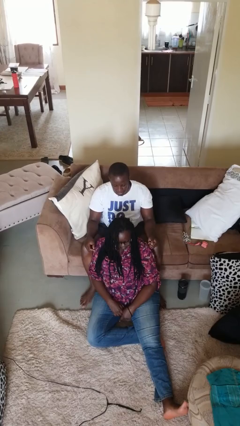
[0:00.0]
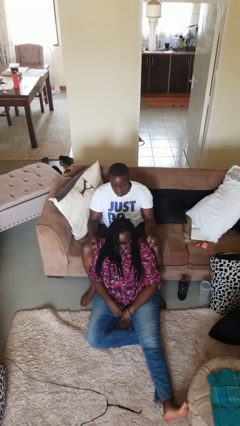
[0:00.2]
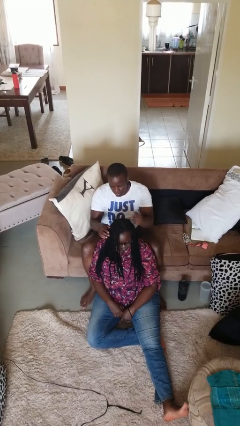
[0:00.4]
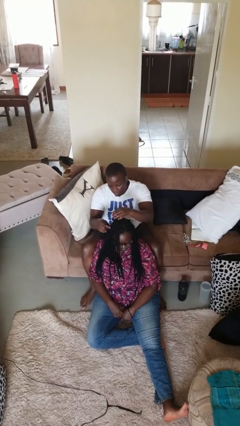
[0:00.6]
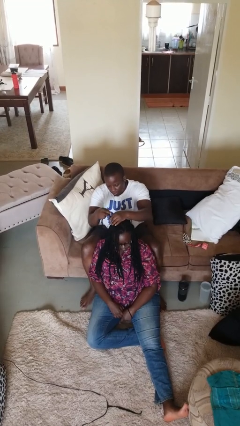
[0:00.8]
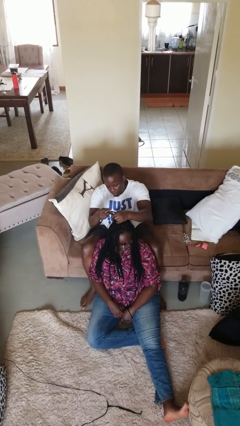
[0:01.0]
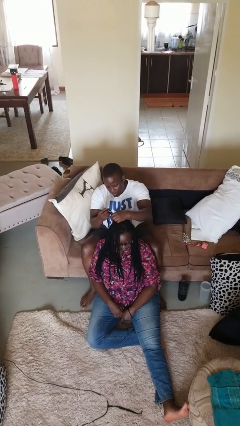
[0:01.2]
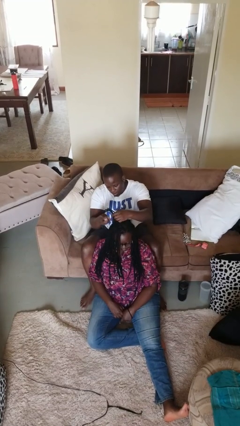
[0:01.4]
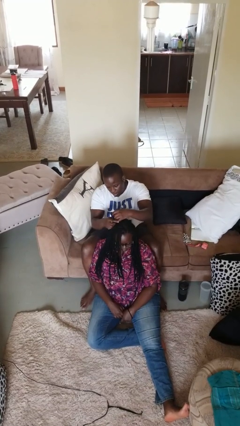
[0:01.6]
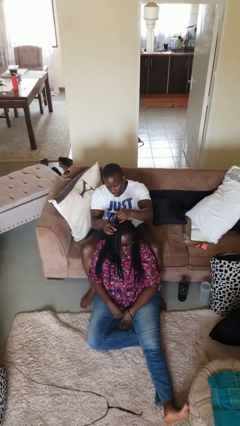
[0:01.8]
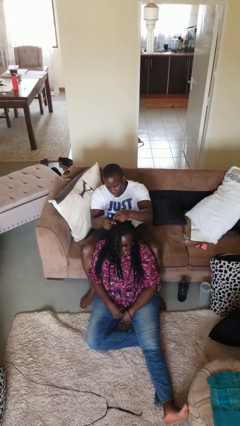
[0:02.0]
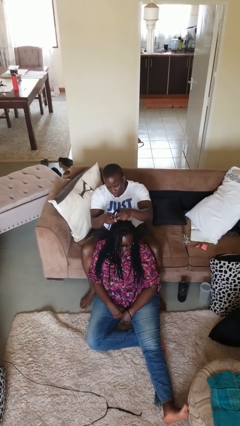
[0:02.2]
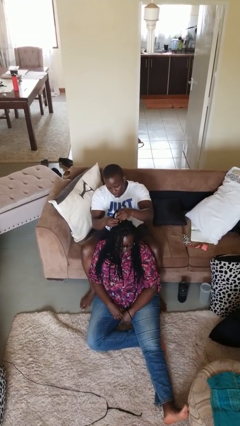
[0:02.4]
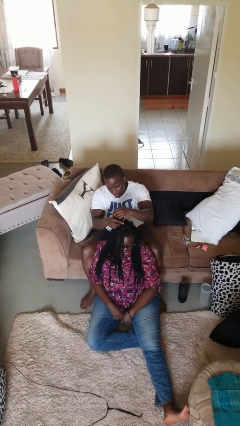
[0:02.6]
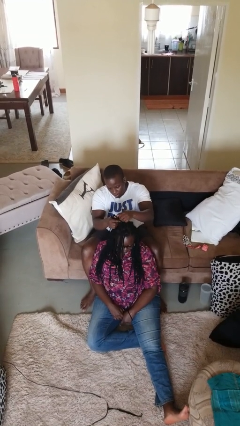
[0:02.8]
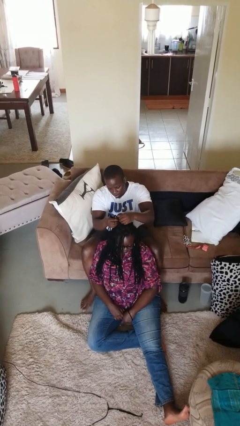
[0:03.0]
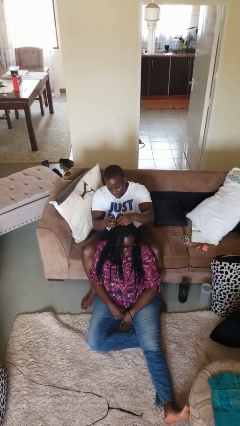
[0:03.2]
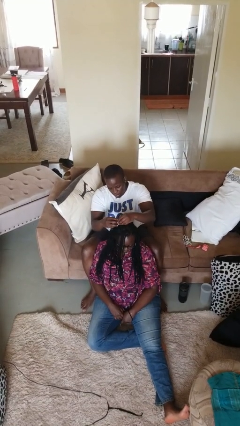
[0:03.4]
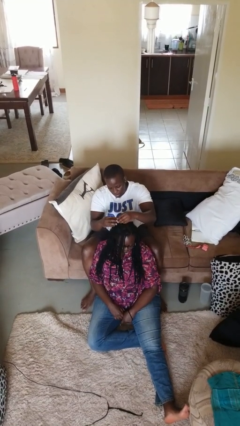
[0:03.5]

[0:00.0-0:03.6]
person braids hair of person

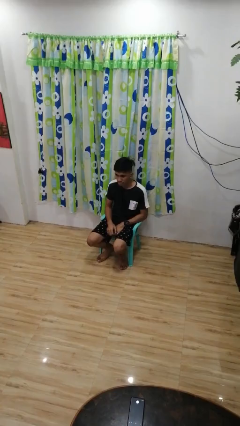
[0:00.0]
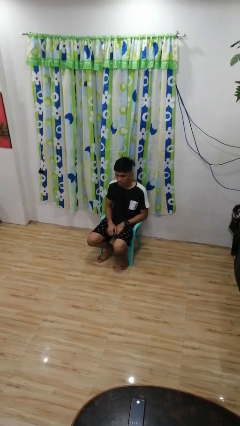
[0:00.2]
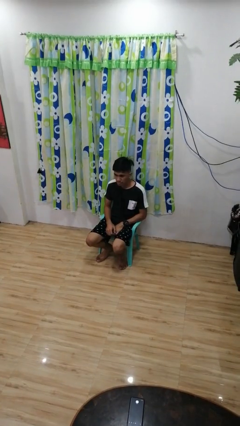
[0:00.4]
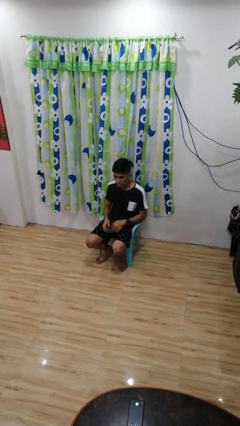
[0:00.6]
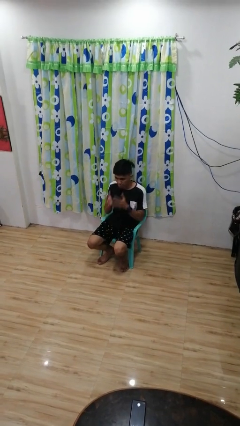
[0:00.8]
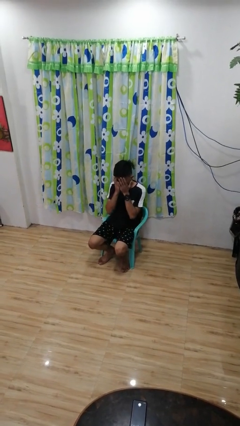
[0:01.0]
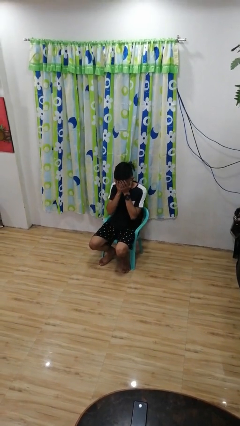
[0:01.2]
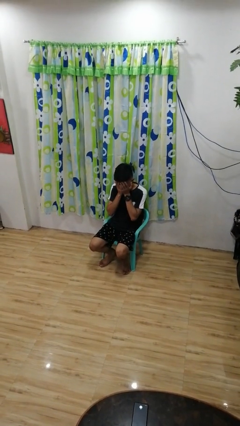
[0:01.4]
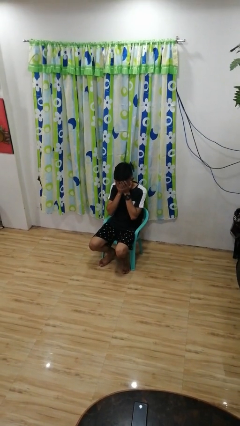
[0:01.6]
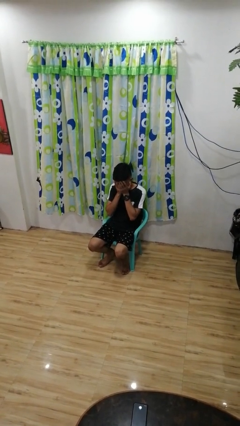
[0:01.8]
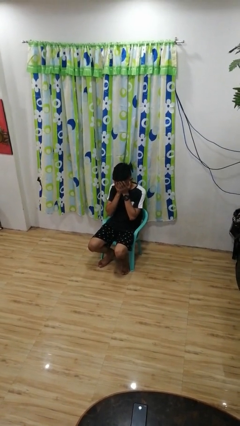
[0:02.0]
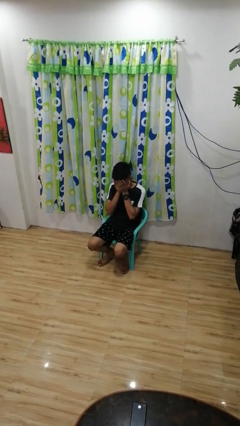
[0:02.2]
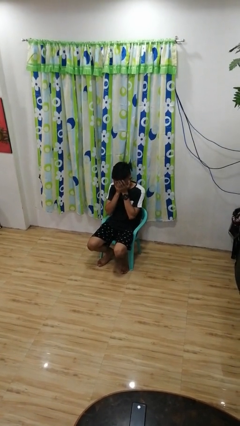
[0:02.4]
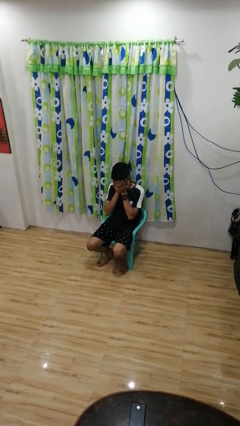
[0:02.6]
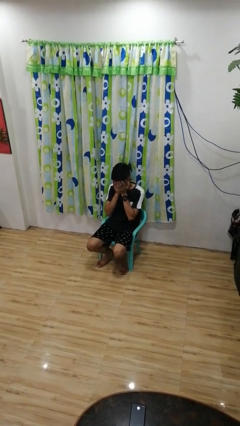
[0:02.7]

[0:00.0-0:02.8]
person covers face with hands

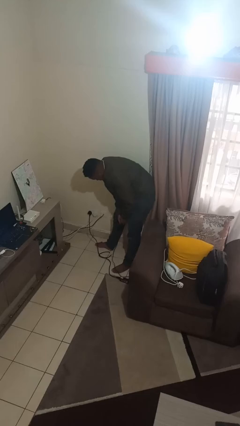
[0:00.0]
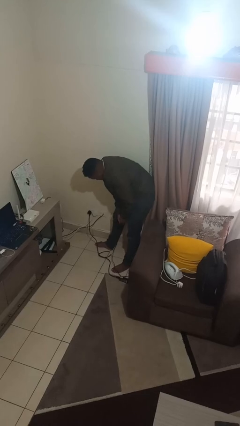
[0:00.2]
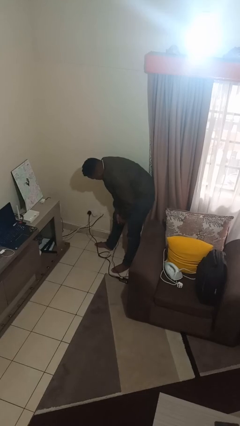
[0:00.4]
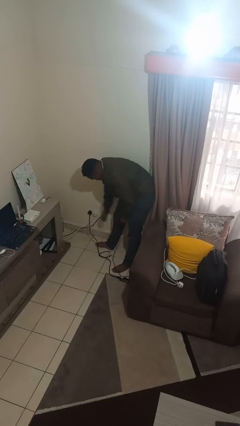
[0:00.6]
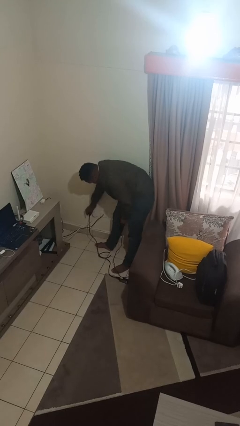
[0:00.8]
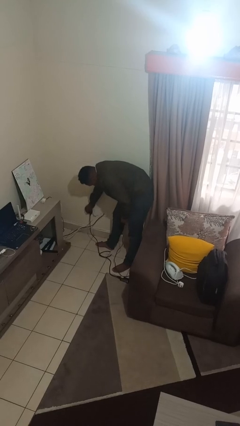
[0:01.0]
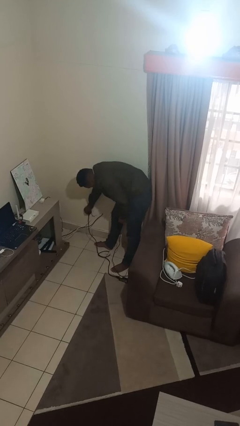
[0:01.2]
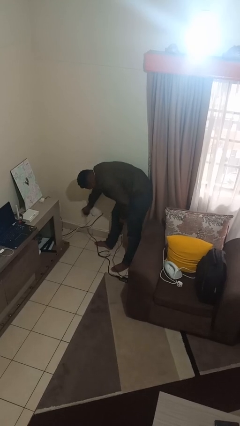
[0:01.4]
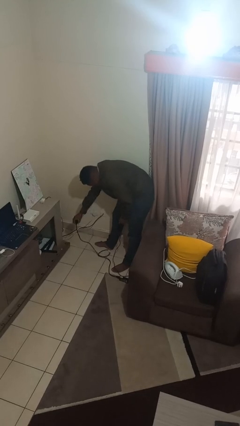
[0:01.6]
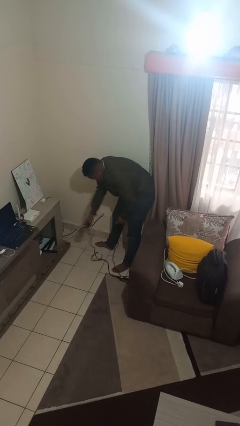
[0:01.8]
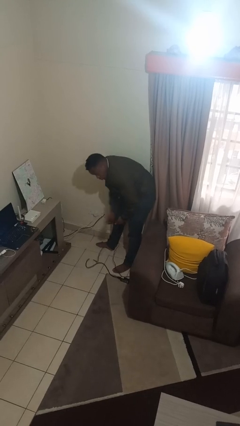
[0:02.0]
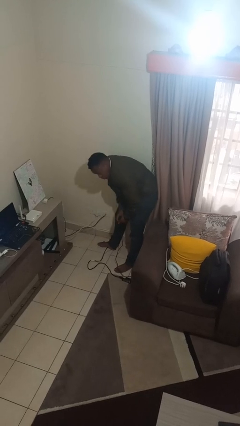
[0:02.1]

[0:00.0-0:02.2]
person unplugs from electrical socket

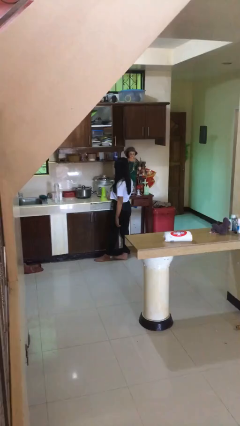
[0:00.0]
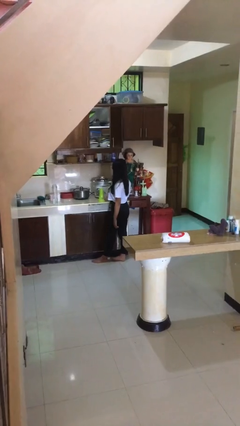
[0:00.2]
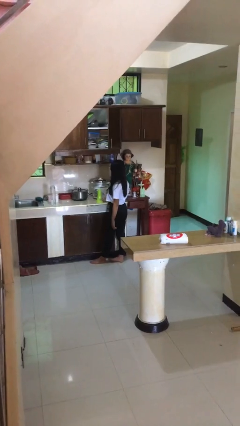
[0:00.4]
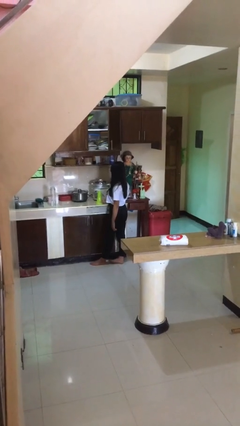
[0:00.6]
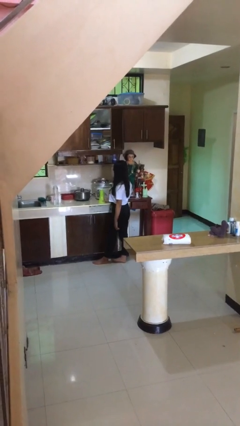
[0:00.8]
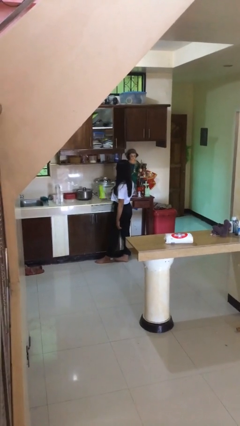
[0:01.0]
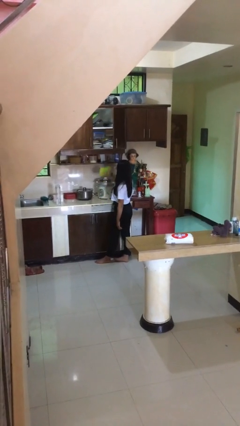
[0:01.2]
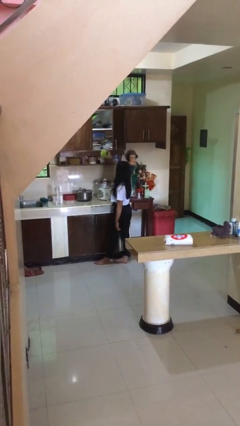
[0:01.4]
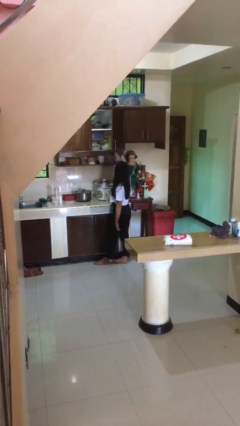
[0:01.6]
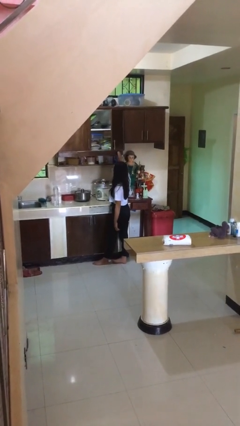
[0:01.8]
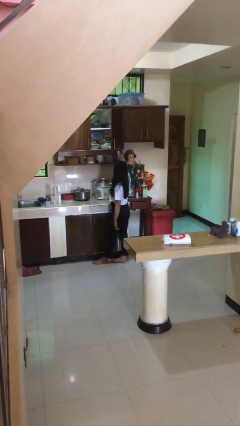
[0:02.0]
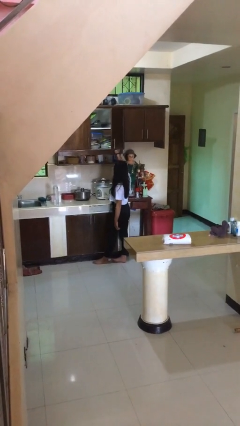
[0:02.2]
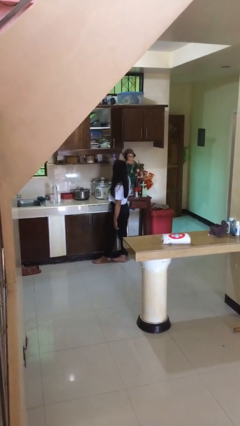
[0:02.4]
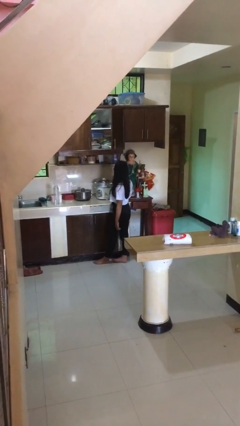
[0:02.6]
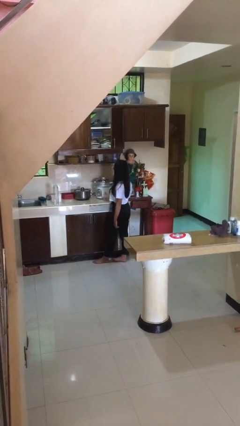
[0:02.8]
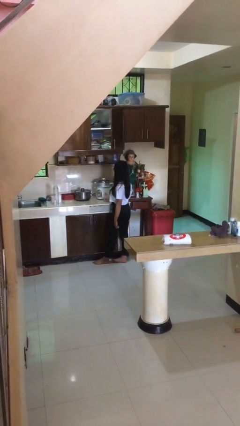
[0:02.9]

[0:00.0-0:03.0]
person puts down object into cabinet

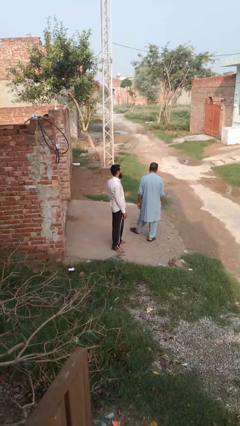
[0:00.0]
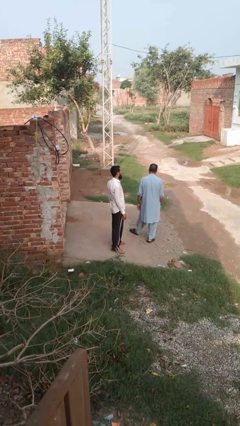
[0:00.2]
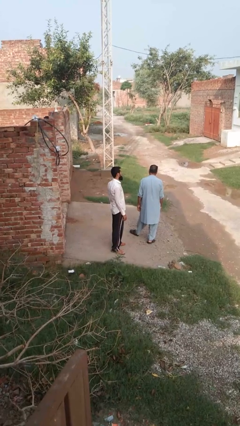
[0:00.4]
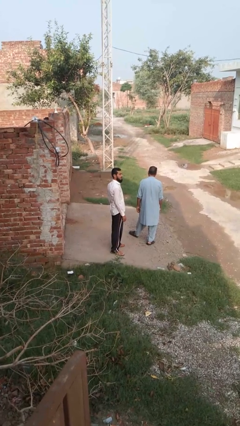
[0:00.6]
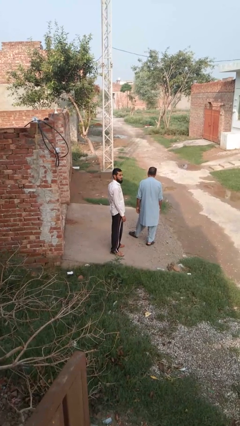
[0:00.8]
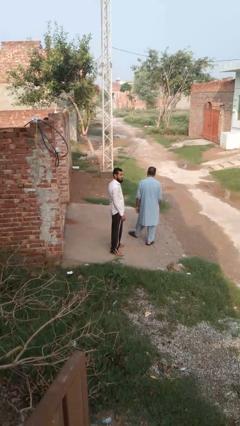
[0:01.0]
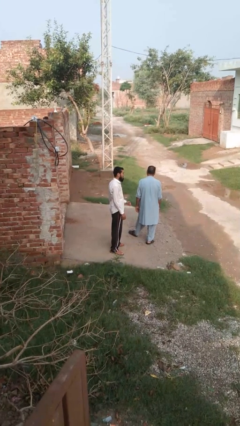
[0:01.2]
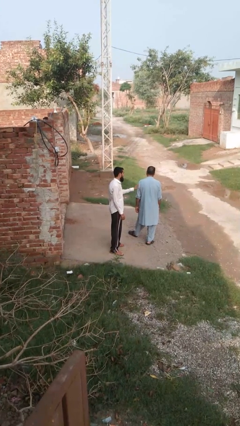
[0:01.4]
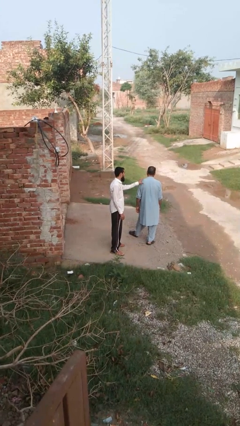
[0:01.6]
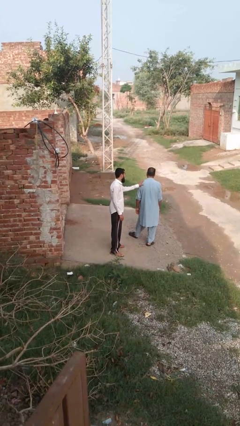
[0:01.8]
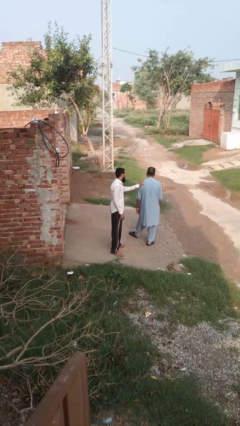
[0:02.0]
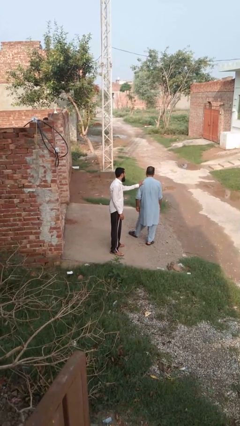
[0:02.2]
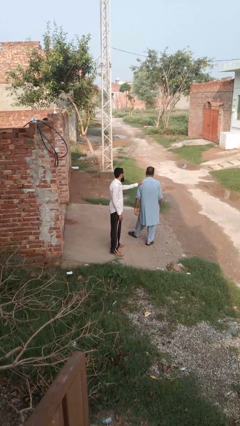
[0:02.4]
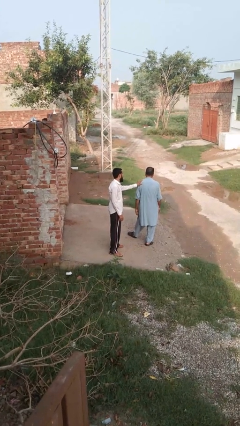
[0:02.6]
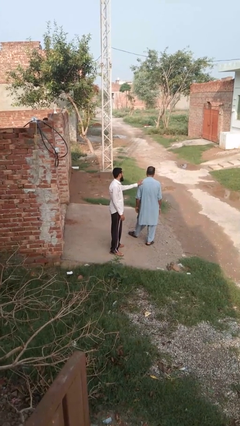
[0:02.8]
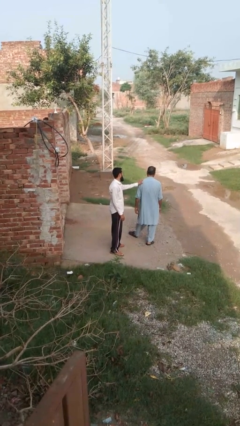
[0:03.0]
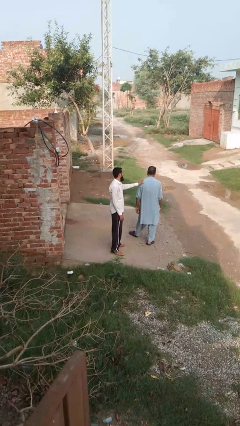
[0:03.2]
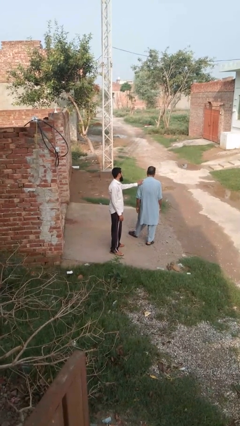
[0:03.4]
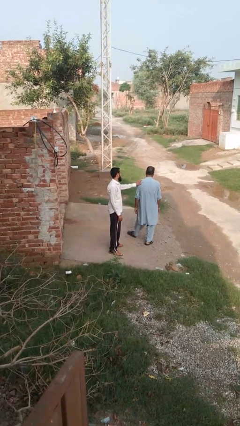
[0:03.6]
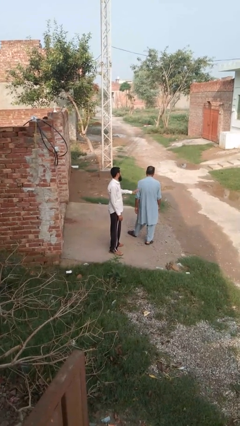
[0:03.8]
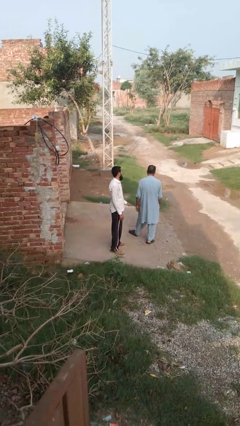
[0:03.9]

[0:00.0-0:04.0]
person touches back of person

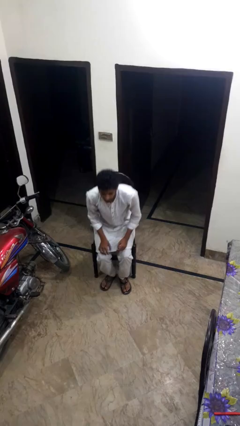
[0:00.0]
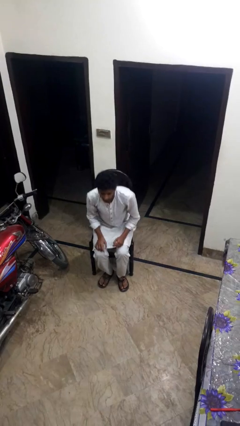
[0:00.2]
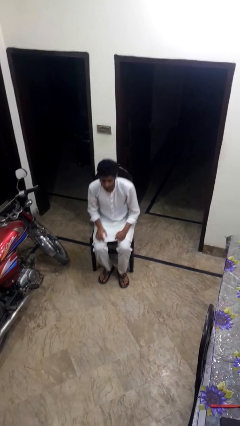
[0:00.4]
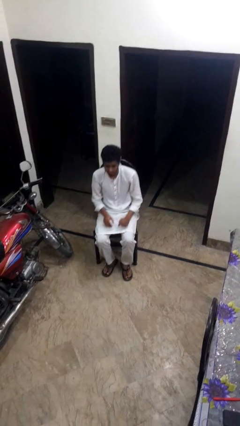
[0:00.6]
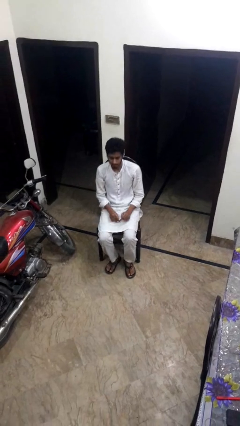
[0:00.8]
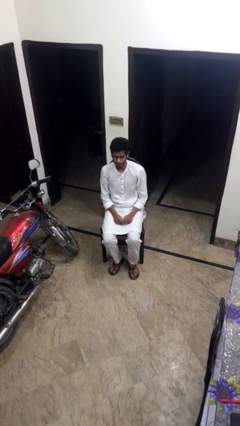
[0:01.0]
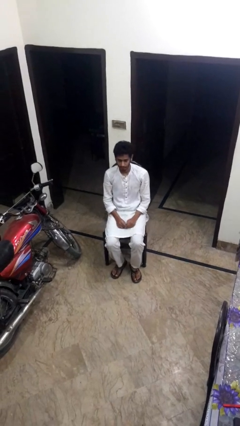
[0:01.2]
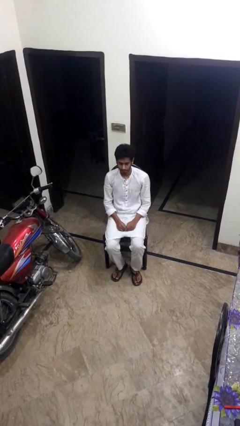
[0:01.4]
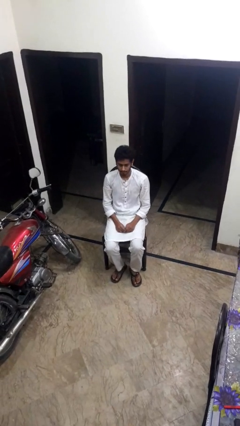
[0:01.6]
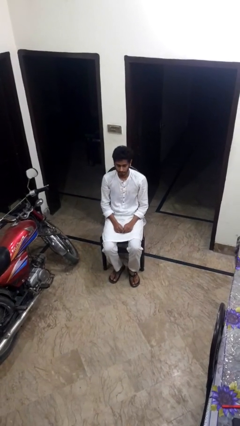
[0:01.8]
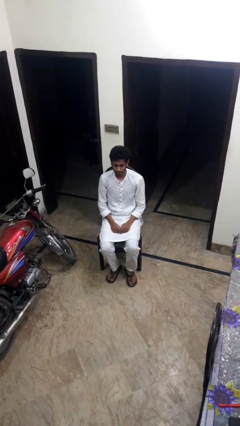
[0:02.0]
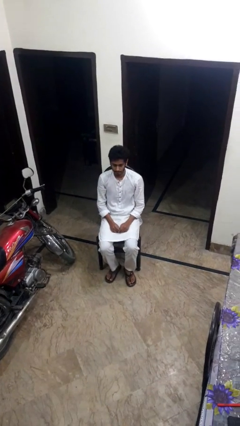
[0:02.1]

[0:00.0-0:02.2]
person sits down
